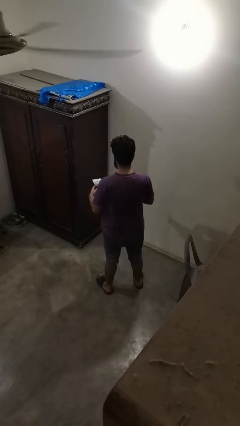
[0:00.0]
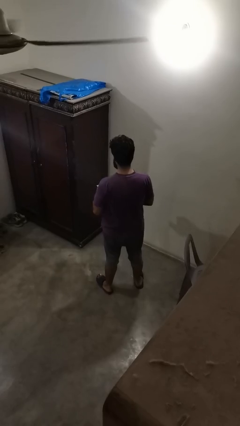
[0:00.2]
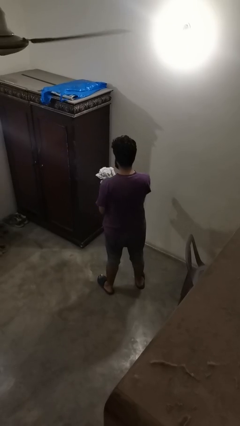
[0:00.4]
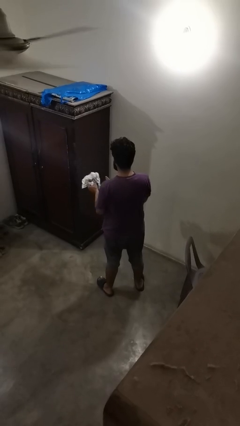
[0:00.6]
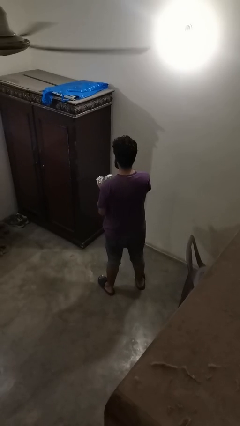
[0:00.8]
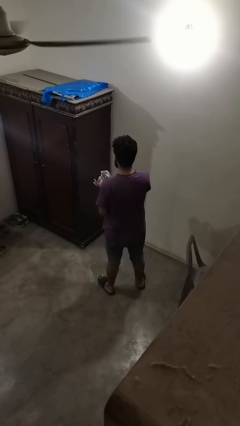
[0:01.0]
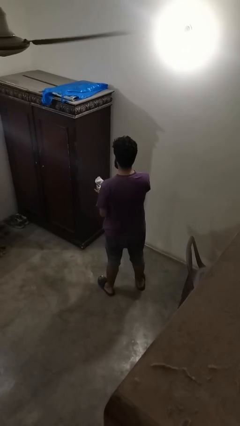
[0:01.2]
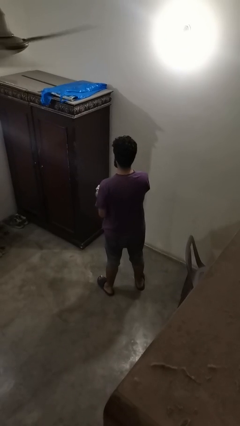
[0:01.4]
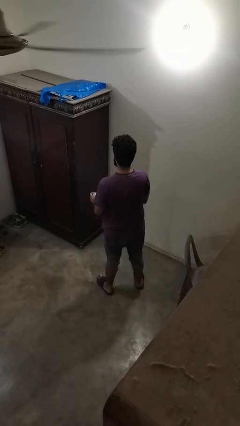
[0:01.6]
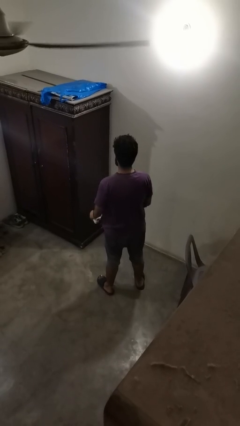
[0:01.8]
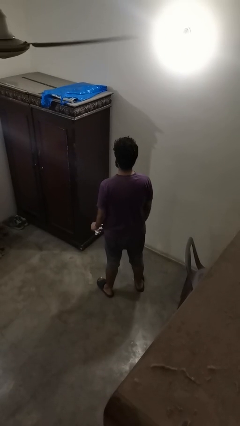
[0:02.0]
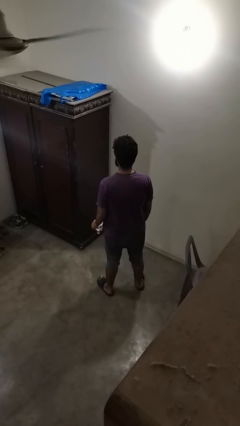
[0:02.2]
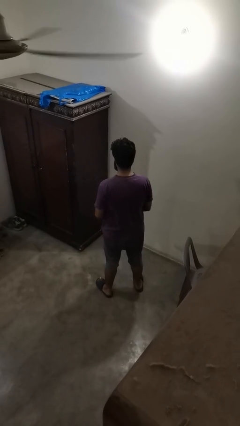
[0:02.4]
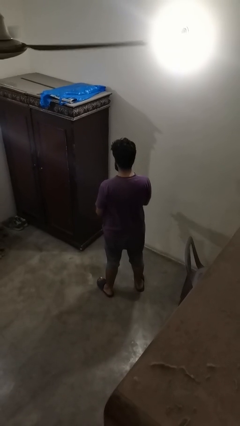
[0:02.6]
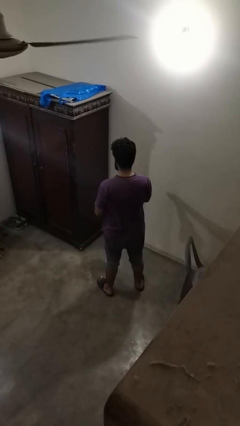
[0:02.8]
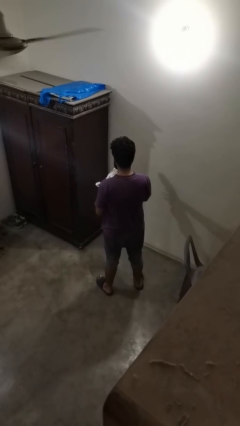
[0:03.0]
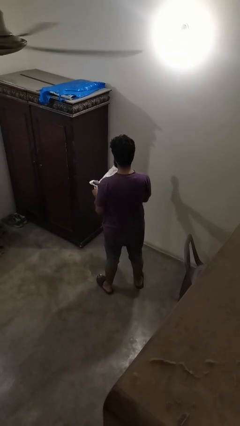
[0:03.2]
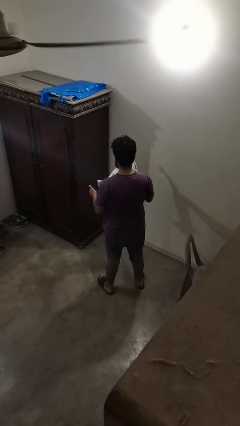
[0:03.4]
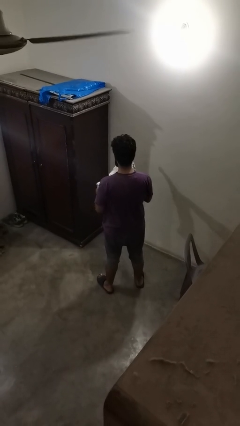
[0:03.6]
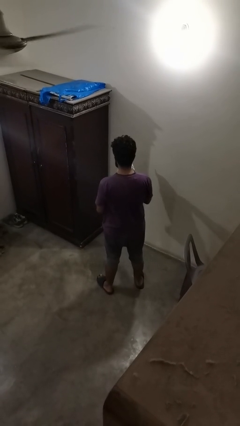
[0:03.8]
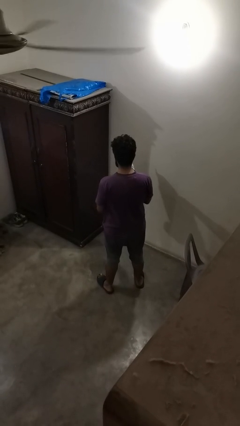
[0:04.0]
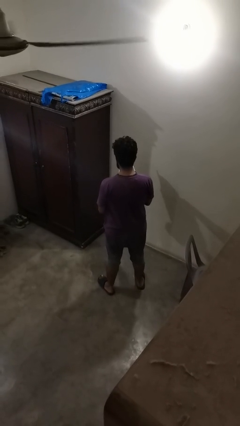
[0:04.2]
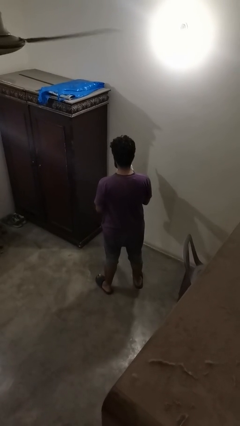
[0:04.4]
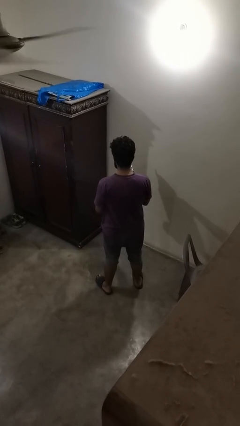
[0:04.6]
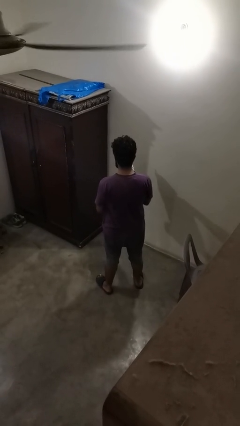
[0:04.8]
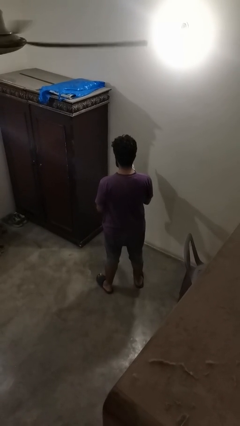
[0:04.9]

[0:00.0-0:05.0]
person crumples paper

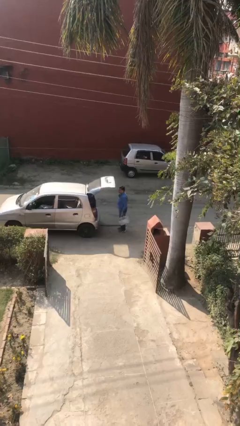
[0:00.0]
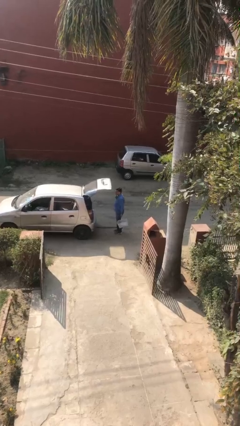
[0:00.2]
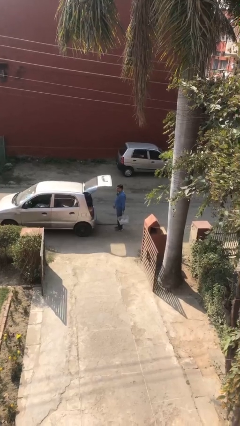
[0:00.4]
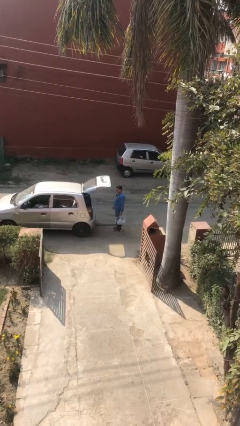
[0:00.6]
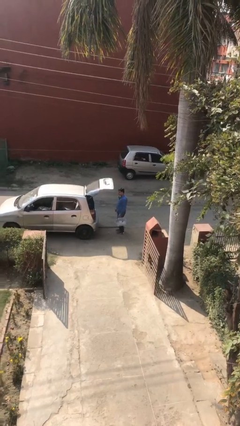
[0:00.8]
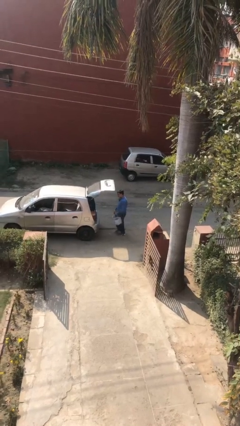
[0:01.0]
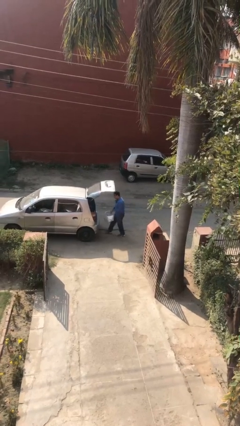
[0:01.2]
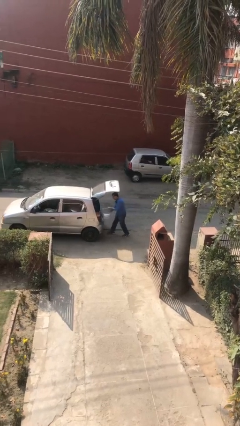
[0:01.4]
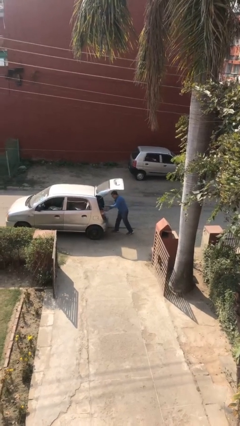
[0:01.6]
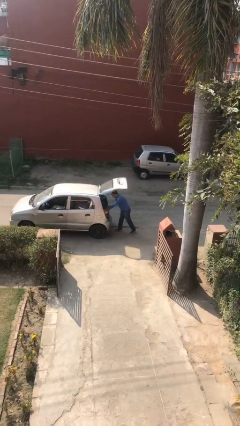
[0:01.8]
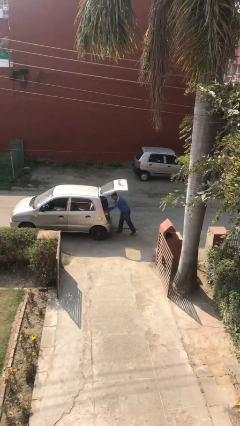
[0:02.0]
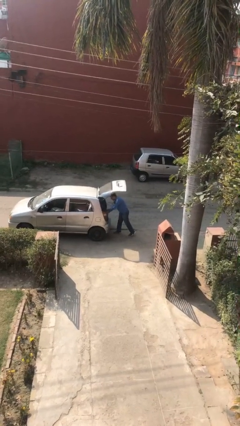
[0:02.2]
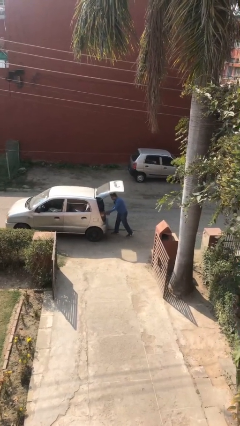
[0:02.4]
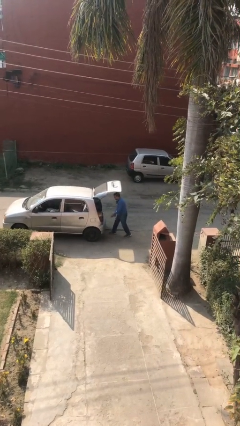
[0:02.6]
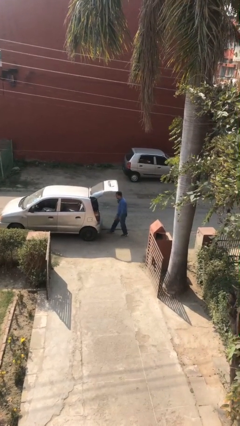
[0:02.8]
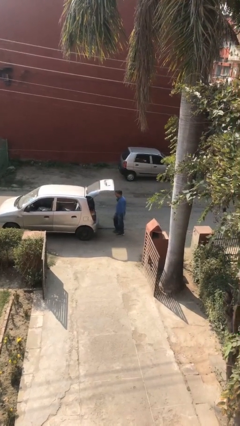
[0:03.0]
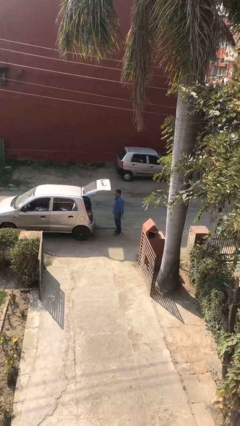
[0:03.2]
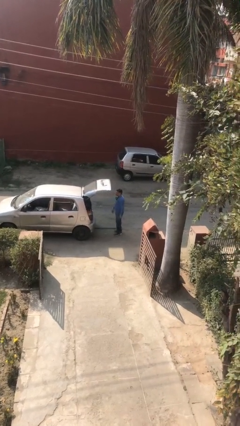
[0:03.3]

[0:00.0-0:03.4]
person loads car

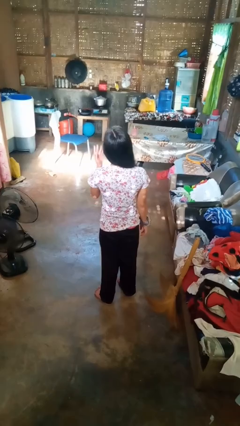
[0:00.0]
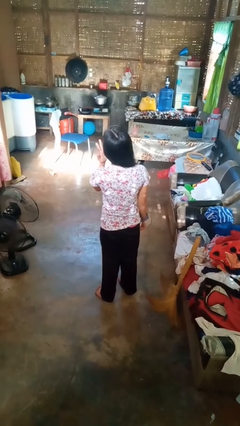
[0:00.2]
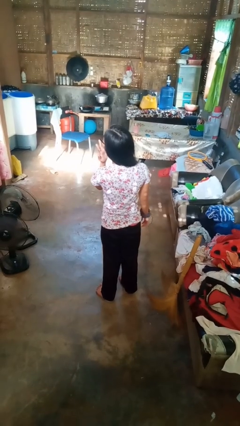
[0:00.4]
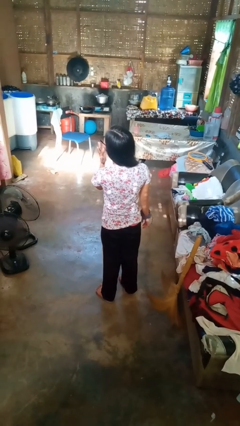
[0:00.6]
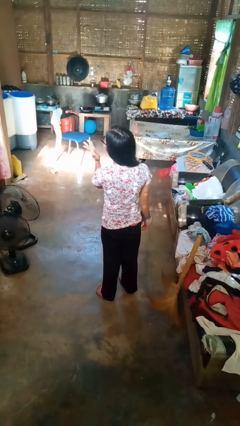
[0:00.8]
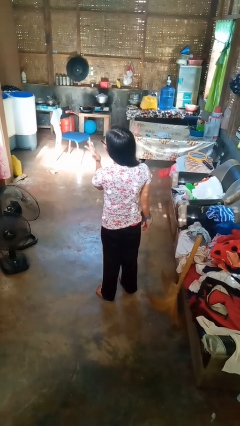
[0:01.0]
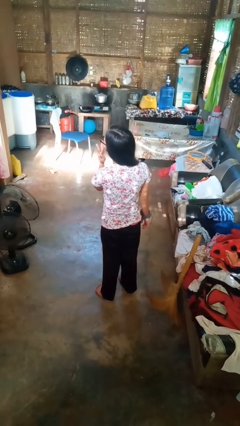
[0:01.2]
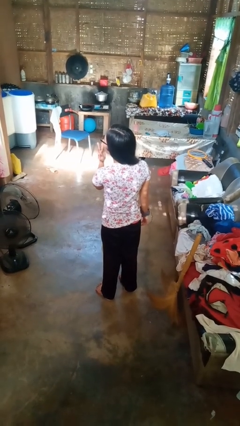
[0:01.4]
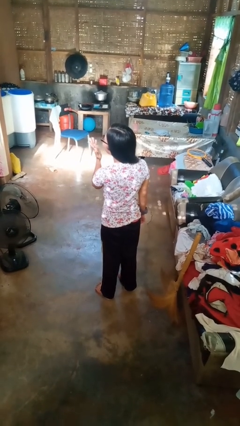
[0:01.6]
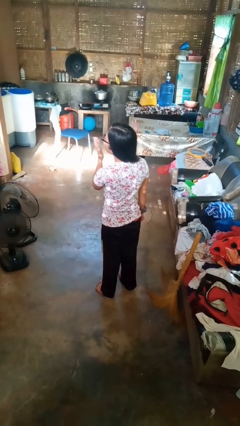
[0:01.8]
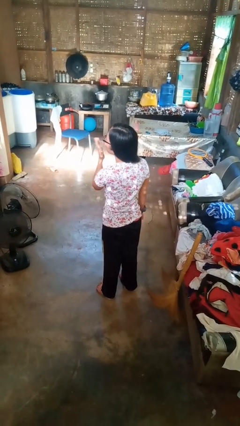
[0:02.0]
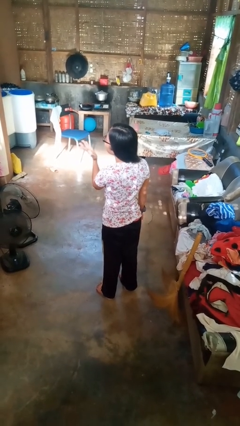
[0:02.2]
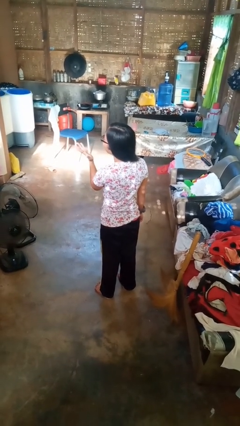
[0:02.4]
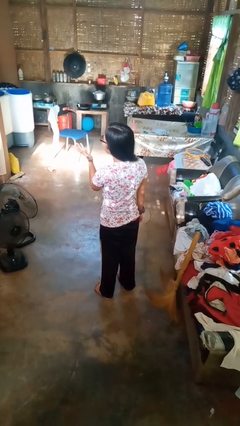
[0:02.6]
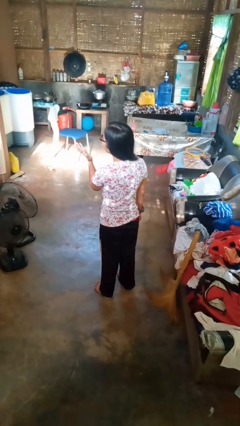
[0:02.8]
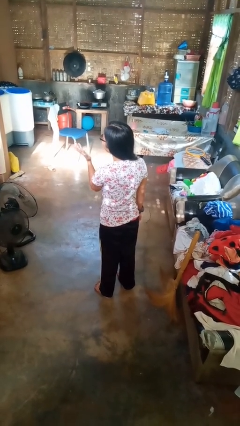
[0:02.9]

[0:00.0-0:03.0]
person licks fingers

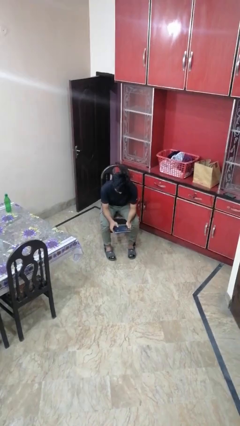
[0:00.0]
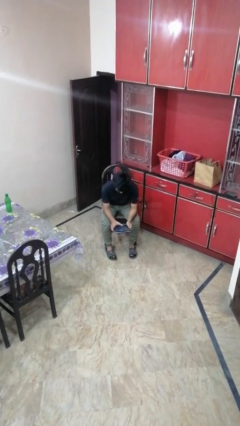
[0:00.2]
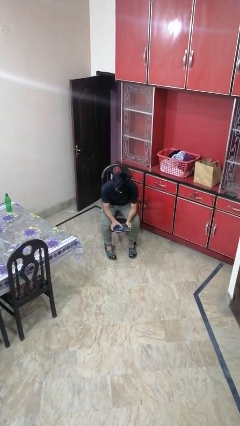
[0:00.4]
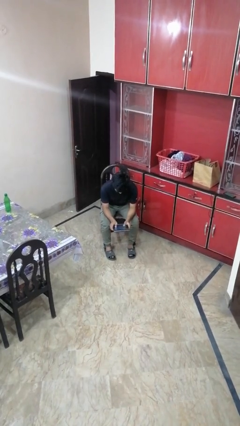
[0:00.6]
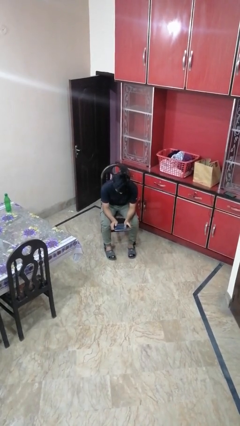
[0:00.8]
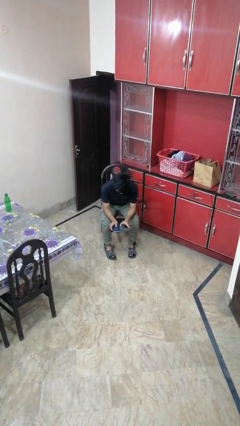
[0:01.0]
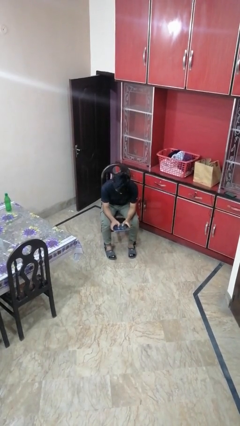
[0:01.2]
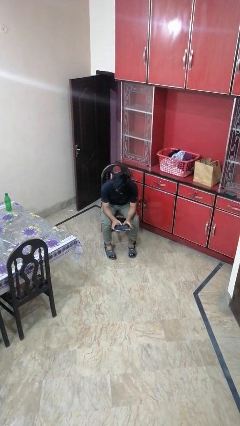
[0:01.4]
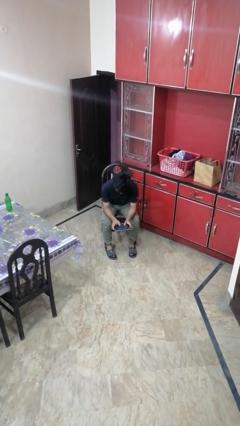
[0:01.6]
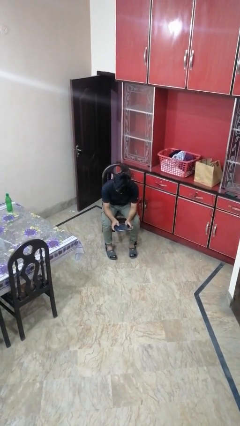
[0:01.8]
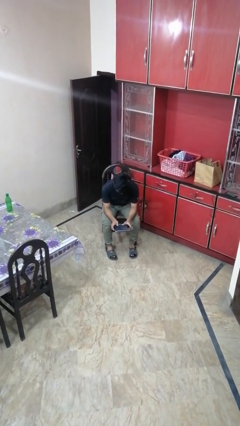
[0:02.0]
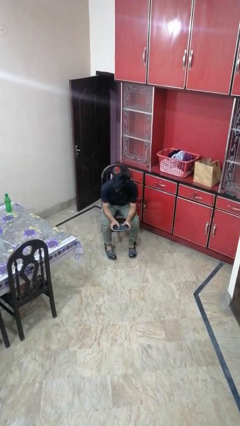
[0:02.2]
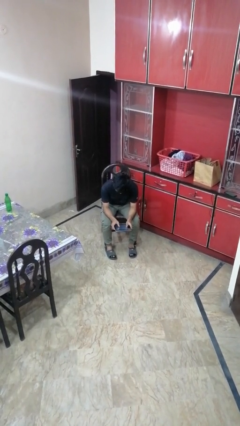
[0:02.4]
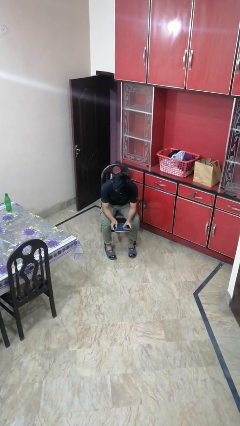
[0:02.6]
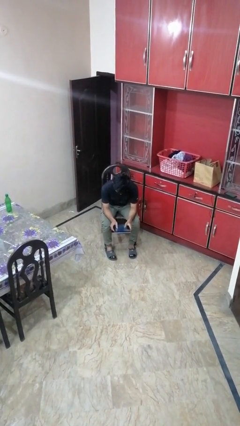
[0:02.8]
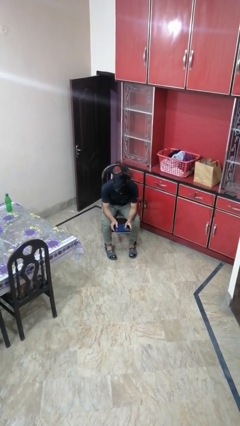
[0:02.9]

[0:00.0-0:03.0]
person interacts with tablet

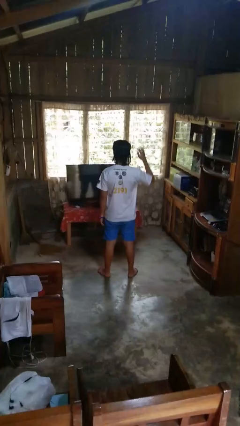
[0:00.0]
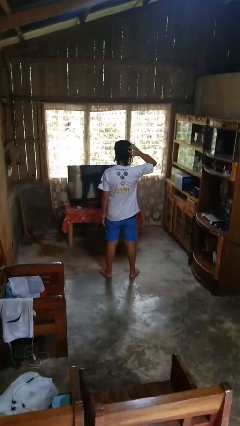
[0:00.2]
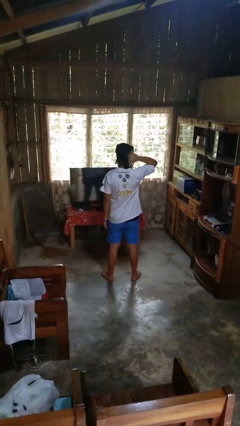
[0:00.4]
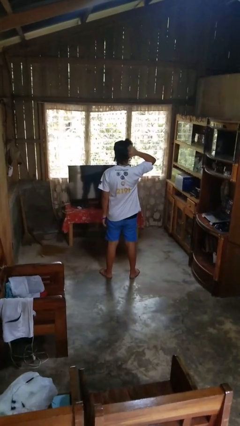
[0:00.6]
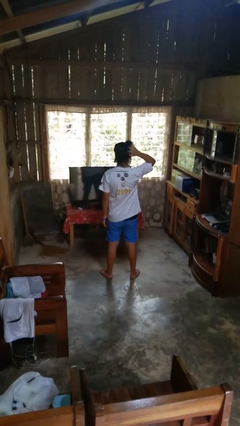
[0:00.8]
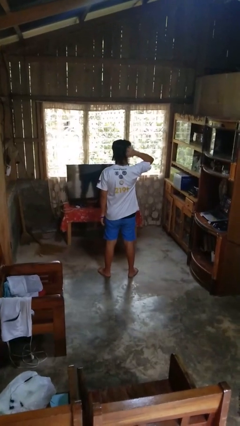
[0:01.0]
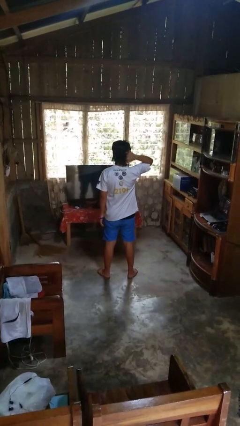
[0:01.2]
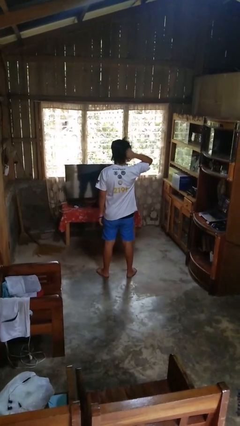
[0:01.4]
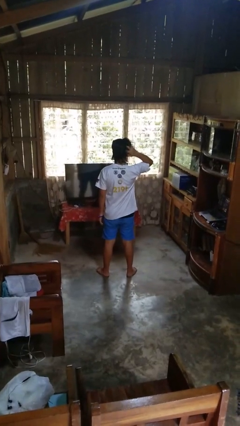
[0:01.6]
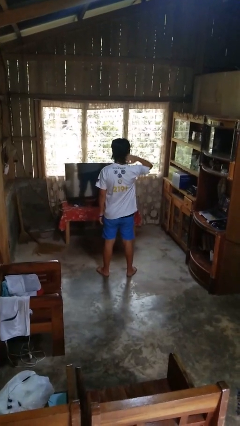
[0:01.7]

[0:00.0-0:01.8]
person scratches face

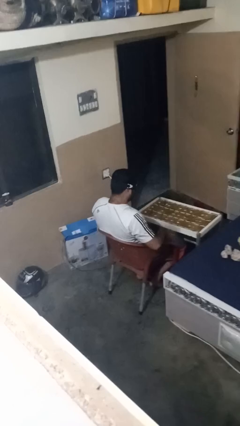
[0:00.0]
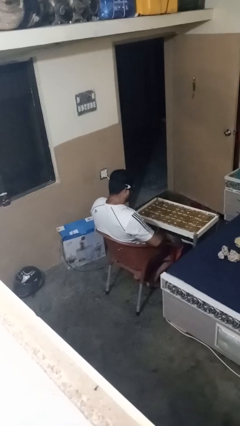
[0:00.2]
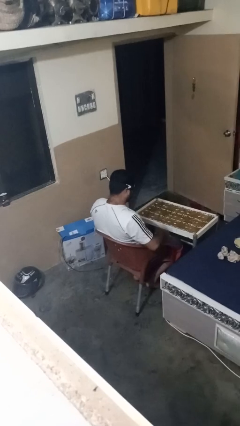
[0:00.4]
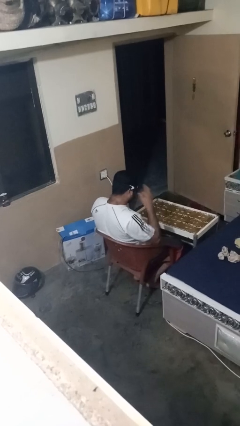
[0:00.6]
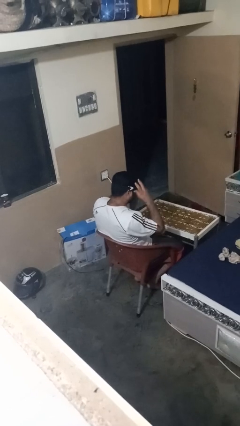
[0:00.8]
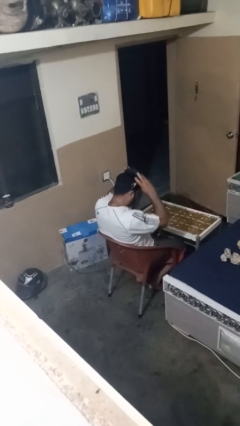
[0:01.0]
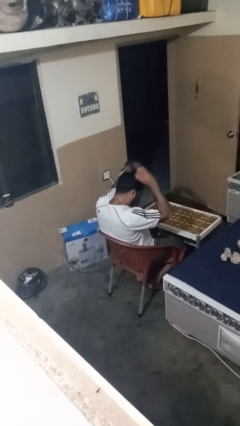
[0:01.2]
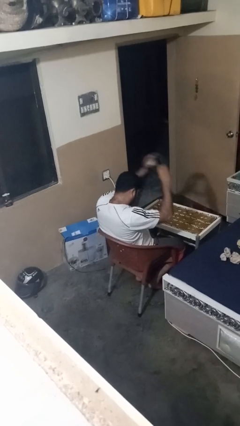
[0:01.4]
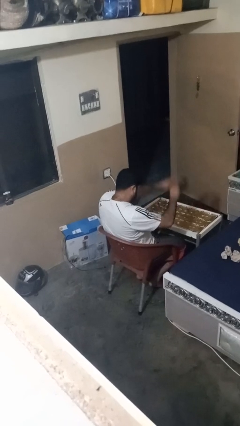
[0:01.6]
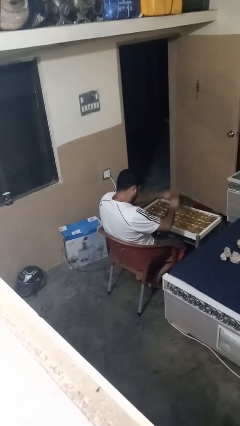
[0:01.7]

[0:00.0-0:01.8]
person takes off sunglasses
